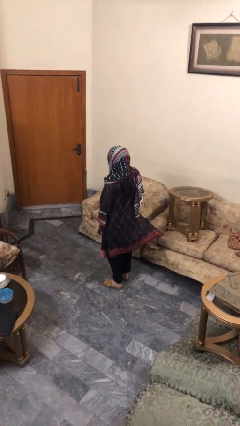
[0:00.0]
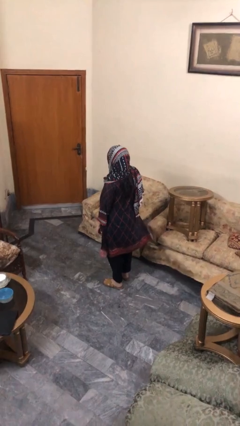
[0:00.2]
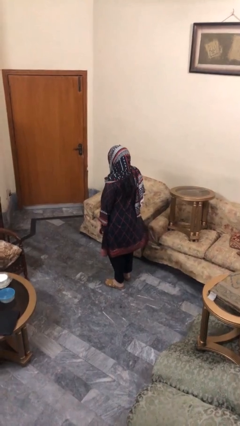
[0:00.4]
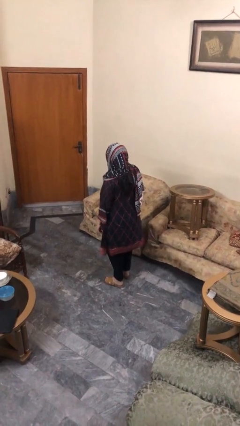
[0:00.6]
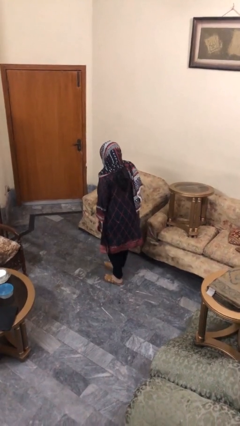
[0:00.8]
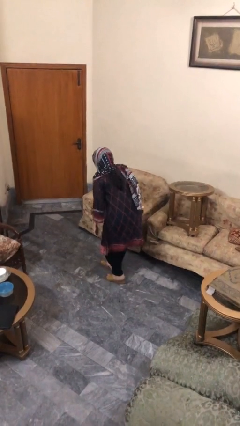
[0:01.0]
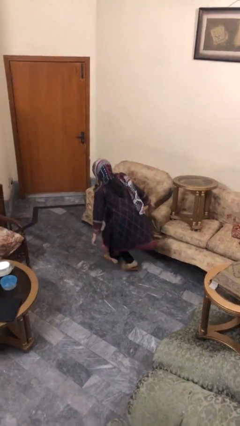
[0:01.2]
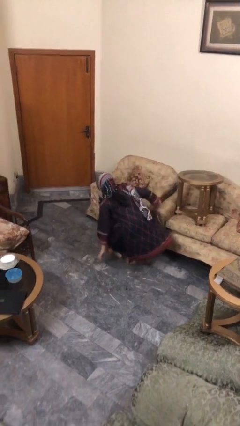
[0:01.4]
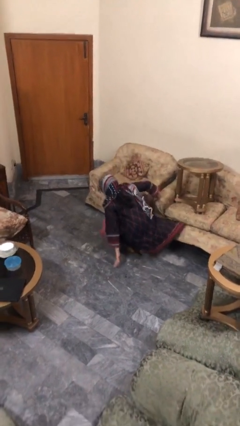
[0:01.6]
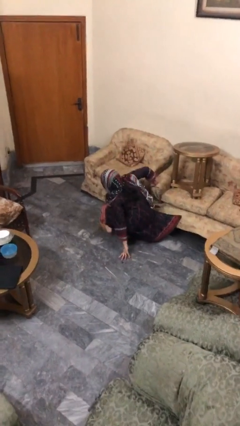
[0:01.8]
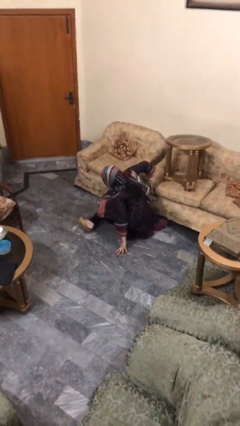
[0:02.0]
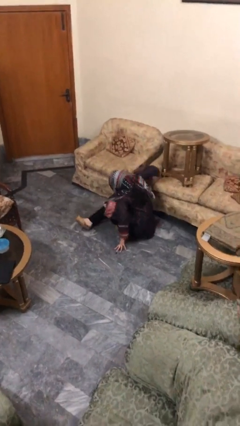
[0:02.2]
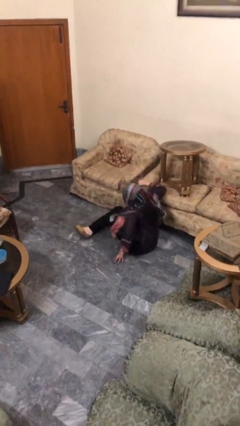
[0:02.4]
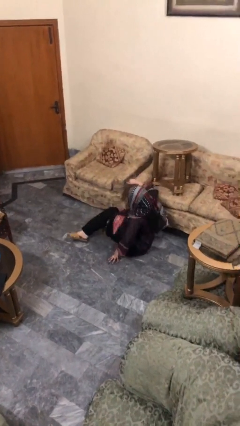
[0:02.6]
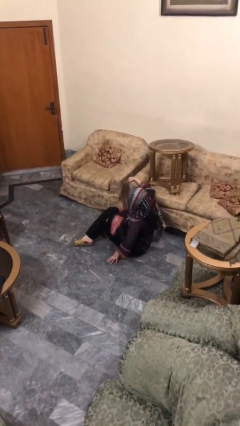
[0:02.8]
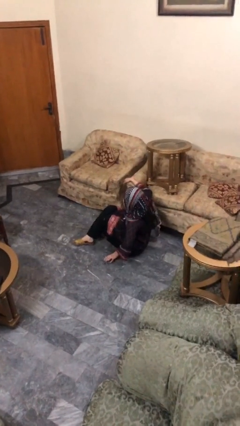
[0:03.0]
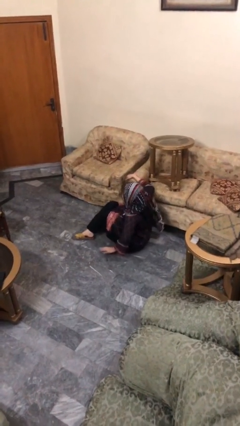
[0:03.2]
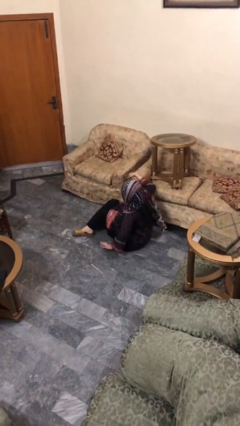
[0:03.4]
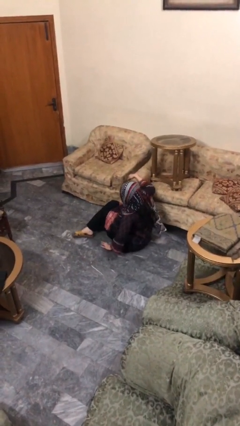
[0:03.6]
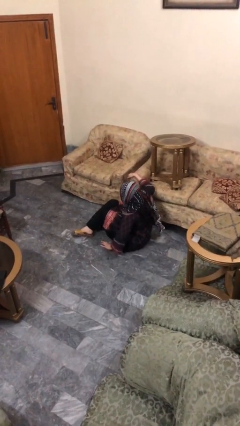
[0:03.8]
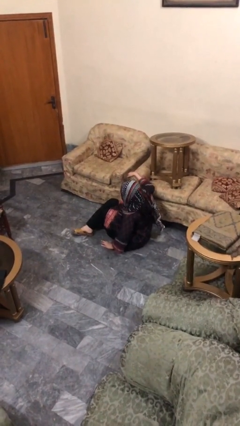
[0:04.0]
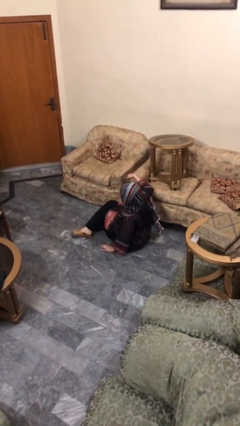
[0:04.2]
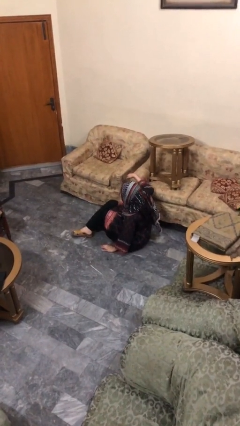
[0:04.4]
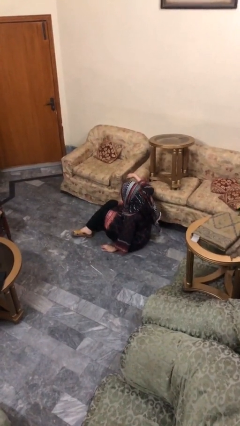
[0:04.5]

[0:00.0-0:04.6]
person sits crisscross

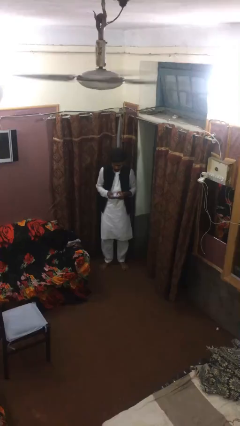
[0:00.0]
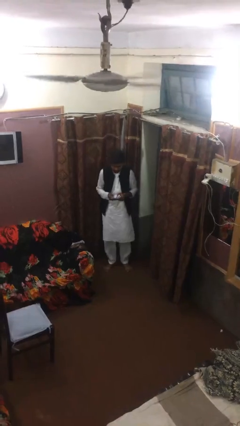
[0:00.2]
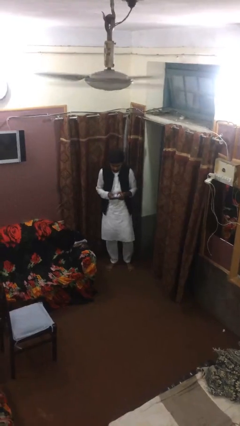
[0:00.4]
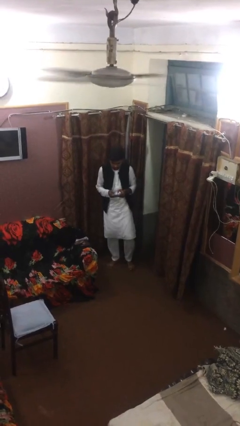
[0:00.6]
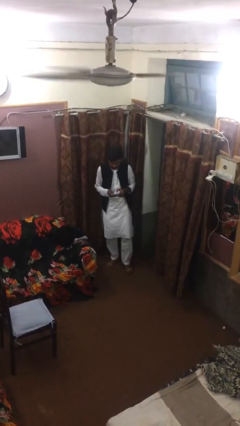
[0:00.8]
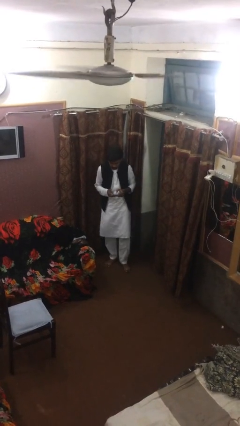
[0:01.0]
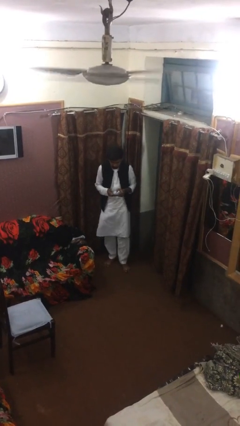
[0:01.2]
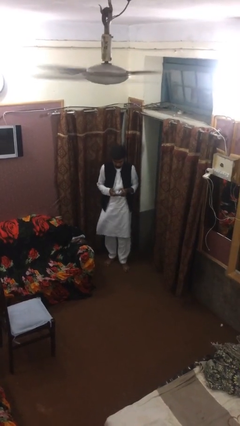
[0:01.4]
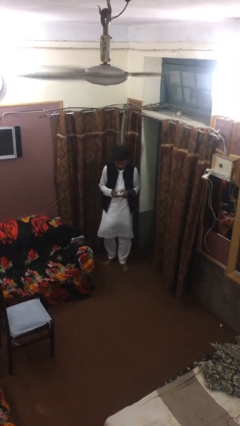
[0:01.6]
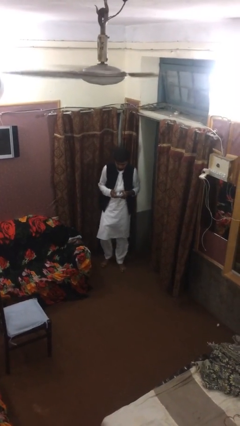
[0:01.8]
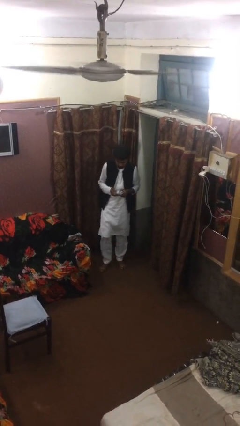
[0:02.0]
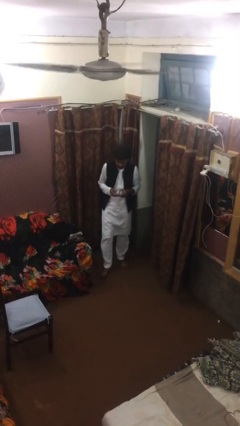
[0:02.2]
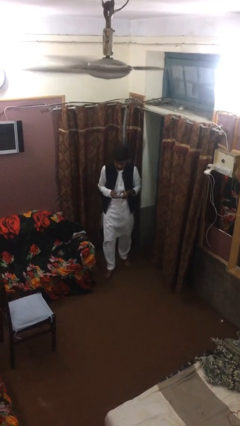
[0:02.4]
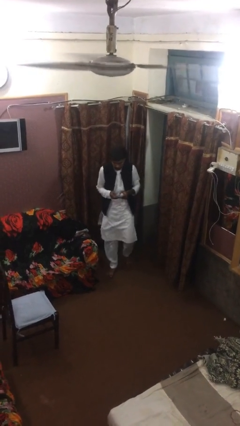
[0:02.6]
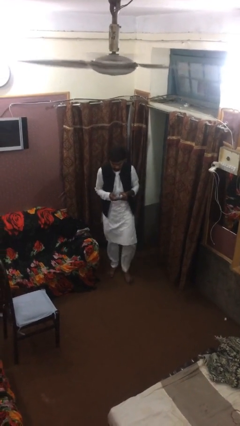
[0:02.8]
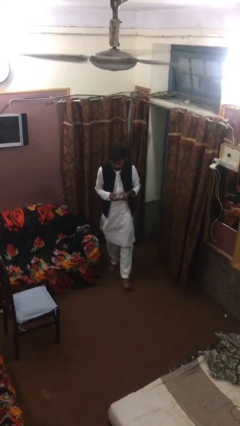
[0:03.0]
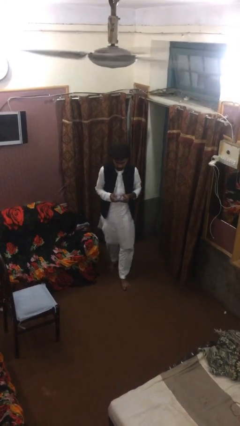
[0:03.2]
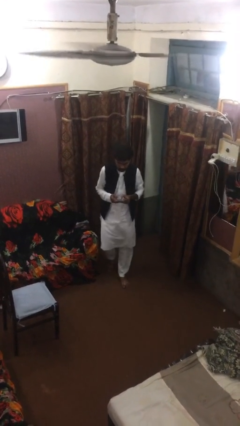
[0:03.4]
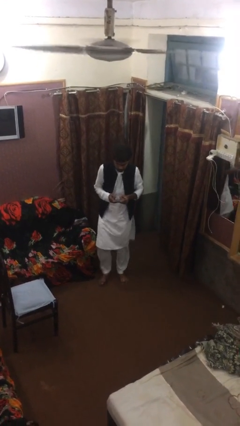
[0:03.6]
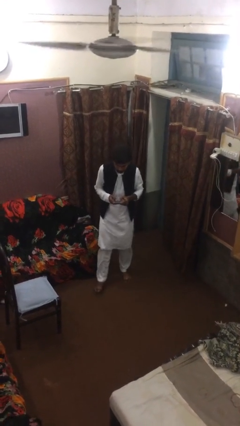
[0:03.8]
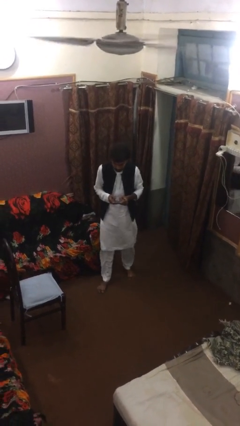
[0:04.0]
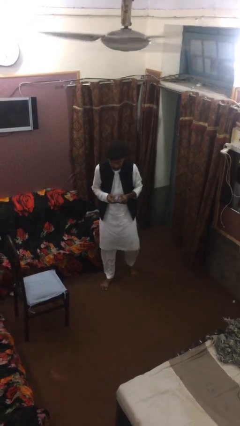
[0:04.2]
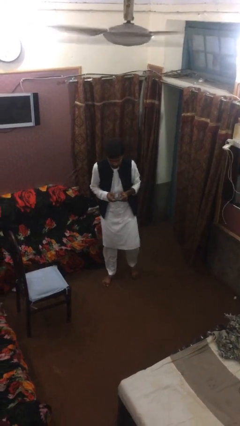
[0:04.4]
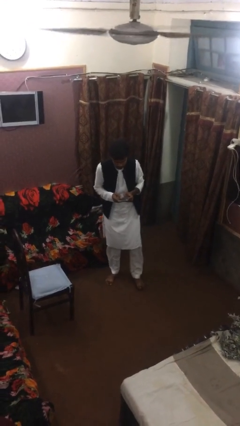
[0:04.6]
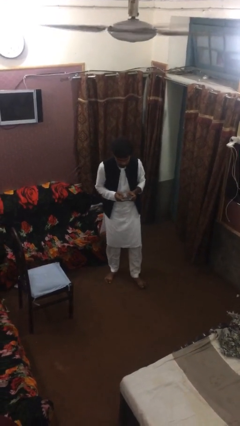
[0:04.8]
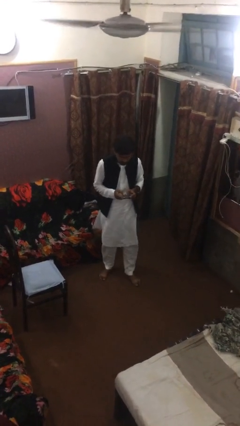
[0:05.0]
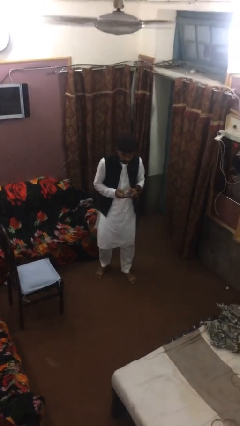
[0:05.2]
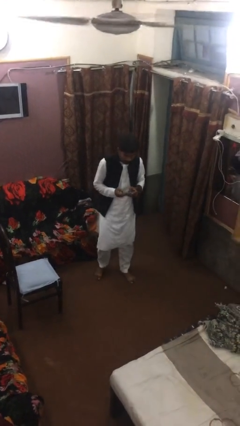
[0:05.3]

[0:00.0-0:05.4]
person texts on phone

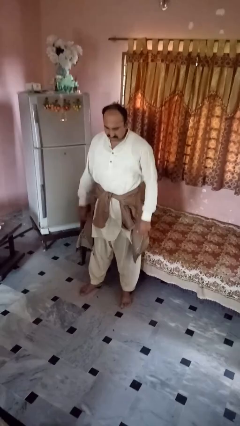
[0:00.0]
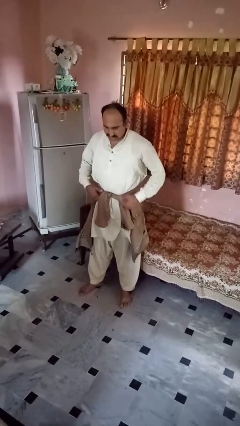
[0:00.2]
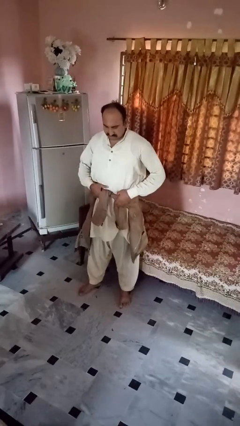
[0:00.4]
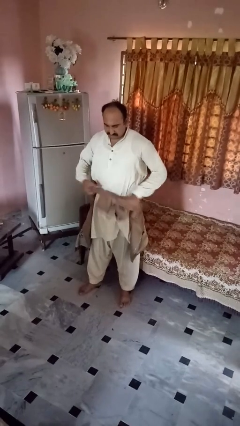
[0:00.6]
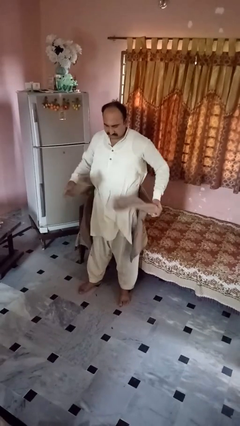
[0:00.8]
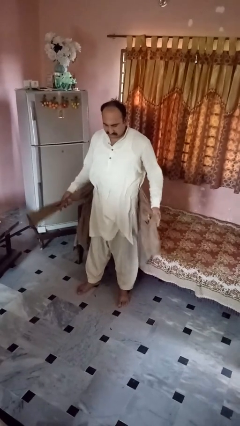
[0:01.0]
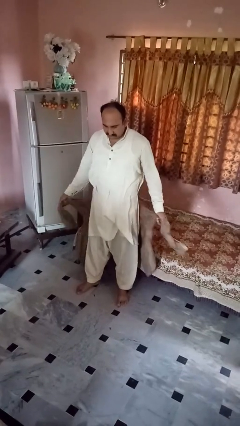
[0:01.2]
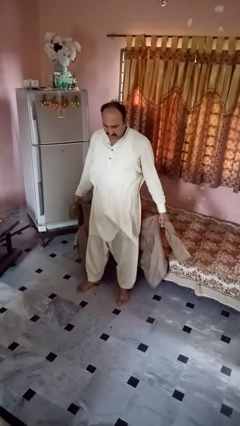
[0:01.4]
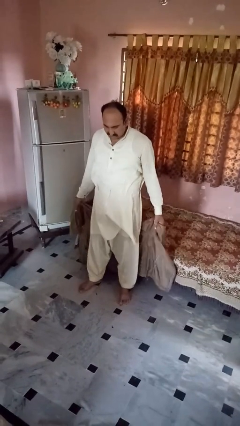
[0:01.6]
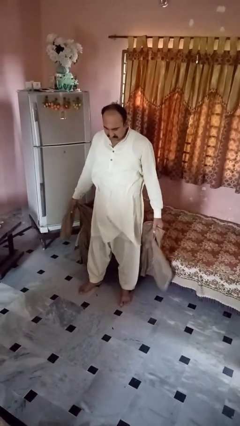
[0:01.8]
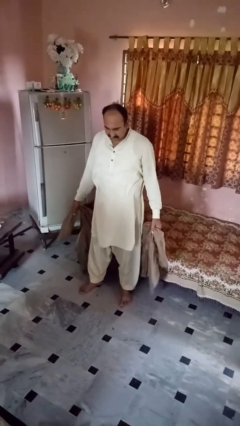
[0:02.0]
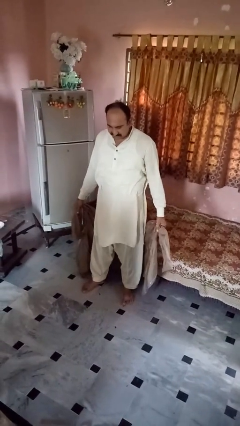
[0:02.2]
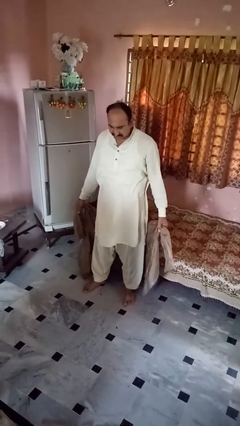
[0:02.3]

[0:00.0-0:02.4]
person unties jacket around waist

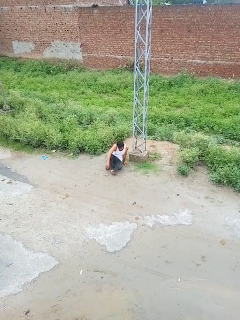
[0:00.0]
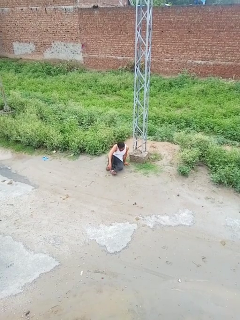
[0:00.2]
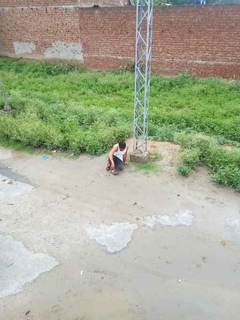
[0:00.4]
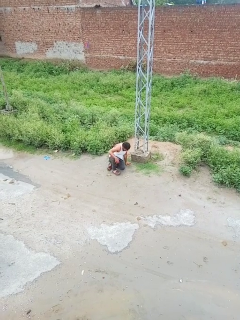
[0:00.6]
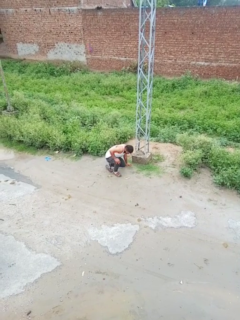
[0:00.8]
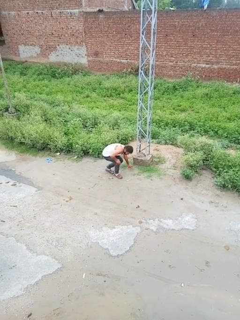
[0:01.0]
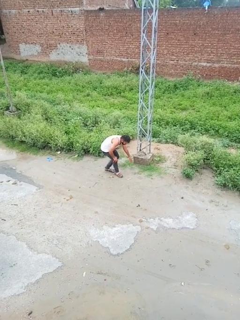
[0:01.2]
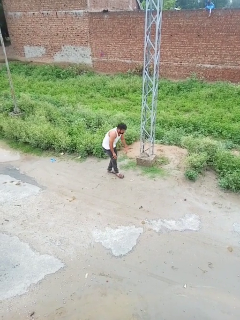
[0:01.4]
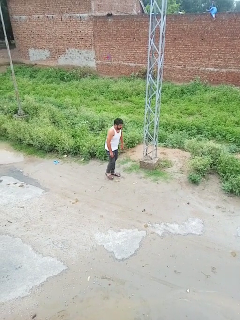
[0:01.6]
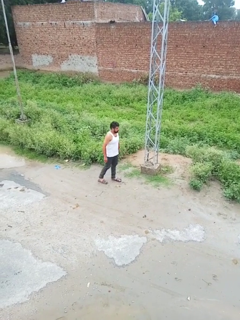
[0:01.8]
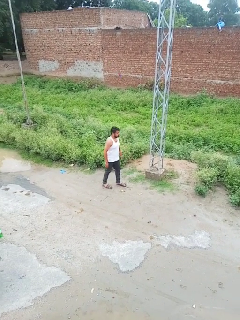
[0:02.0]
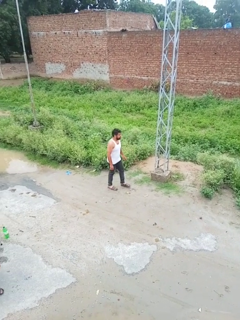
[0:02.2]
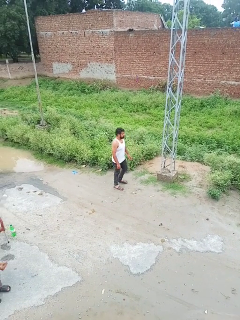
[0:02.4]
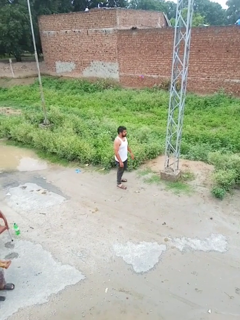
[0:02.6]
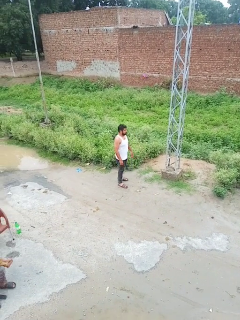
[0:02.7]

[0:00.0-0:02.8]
person stands up from floor

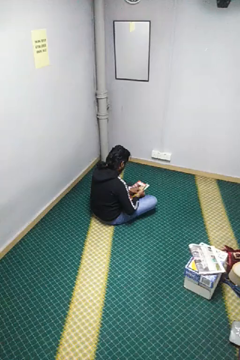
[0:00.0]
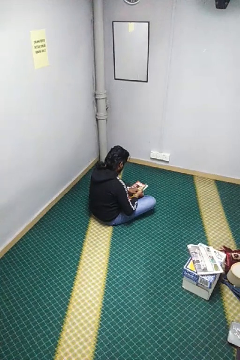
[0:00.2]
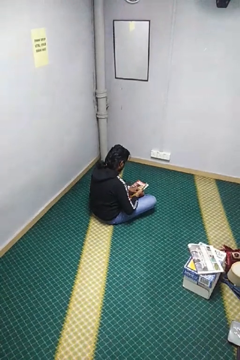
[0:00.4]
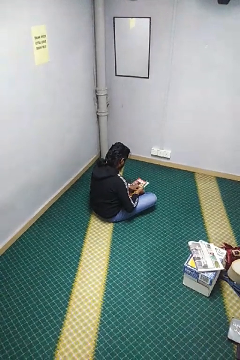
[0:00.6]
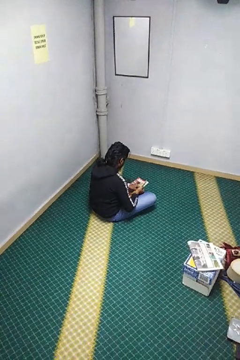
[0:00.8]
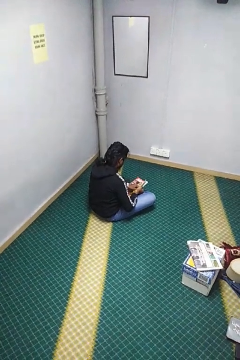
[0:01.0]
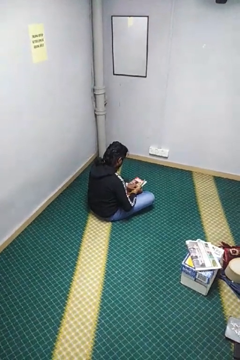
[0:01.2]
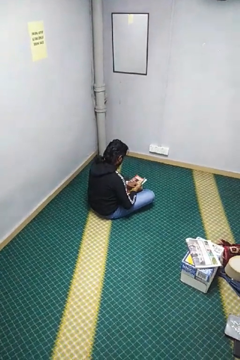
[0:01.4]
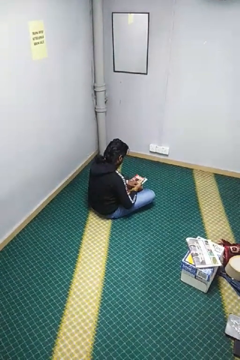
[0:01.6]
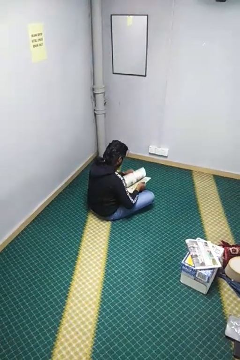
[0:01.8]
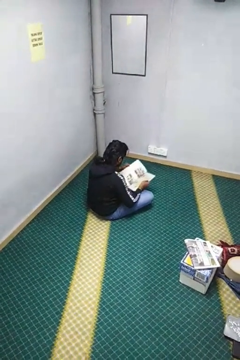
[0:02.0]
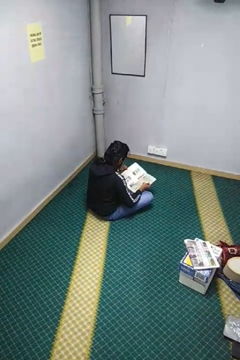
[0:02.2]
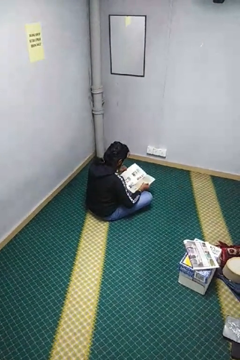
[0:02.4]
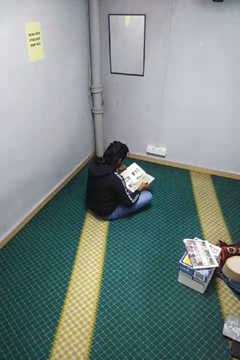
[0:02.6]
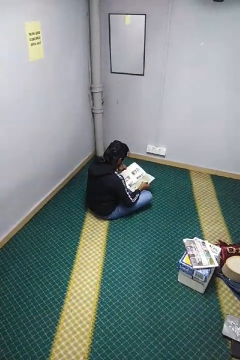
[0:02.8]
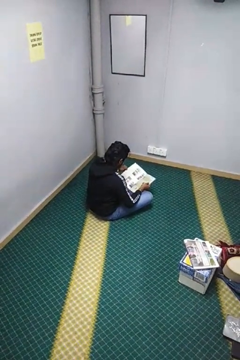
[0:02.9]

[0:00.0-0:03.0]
person reads magazine

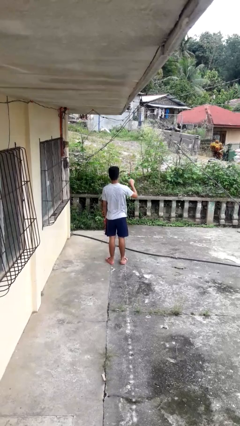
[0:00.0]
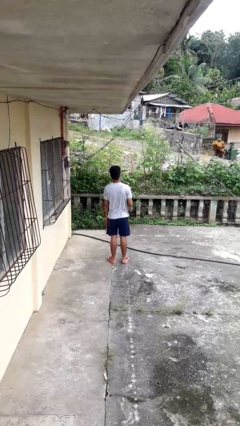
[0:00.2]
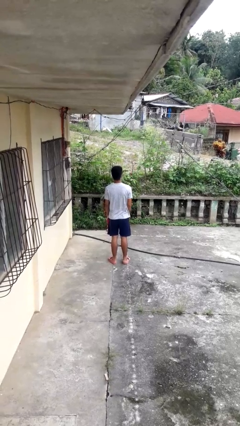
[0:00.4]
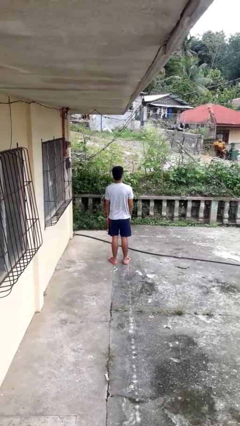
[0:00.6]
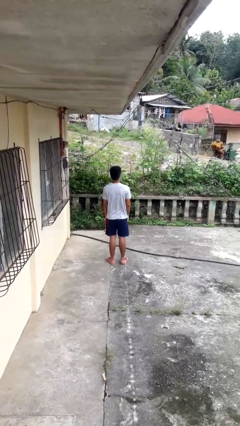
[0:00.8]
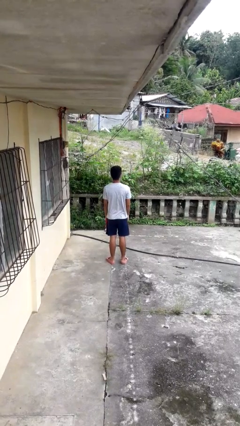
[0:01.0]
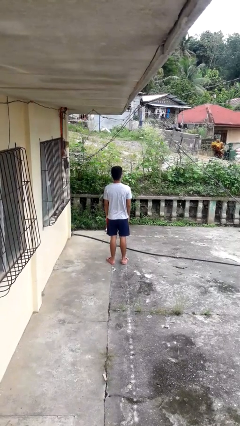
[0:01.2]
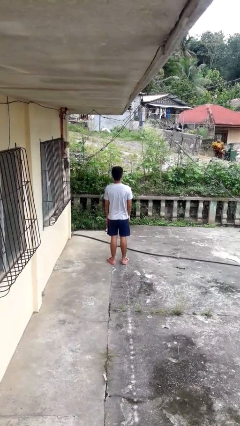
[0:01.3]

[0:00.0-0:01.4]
person gestures lower hand
